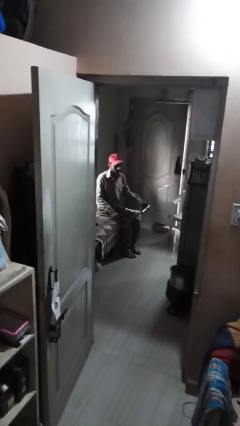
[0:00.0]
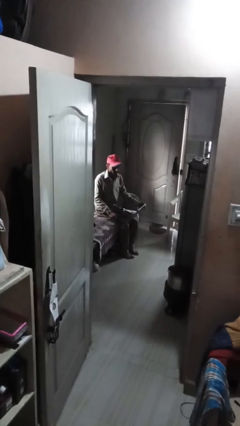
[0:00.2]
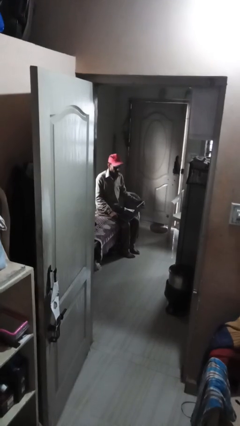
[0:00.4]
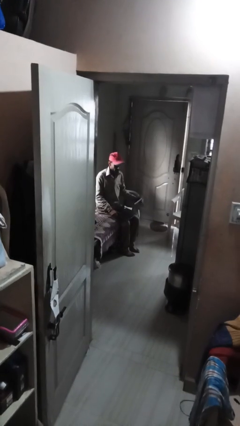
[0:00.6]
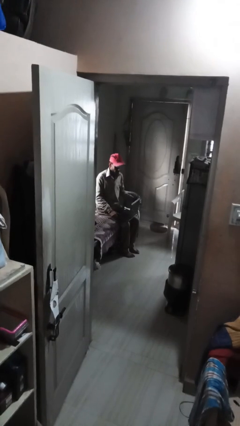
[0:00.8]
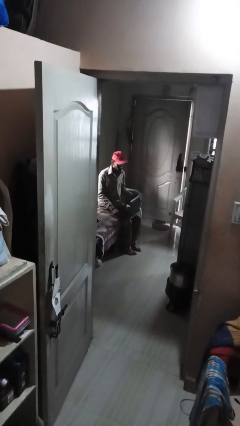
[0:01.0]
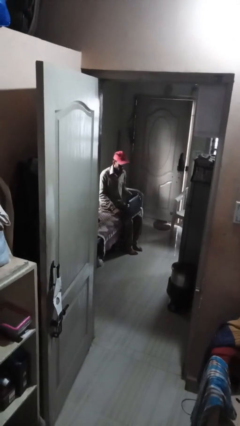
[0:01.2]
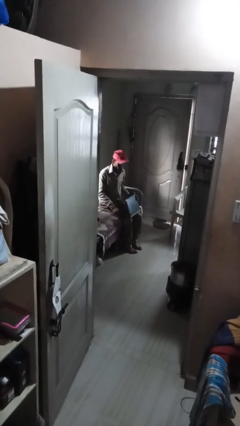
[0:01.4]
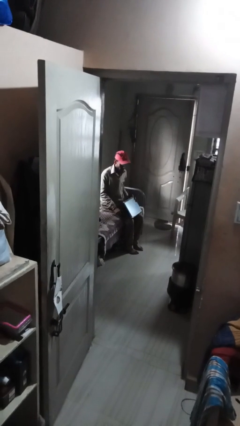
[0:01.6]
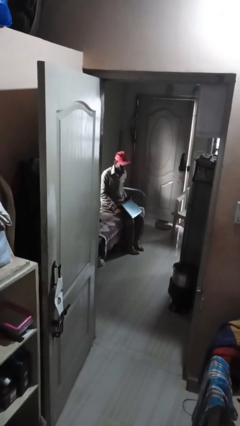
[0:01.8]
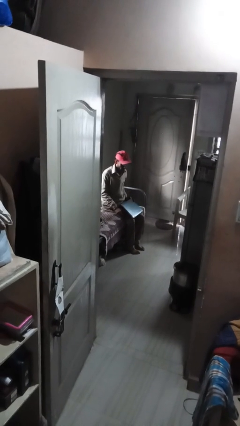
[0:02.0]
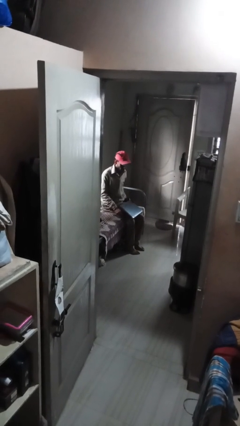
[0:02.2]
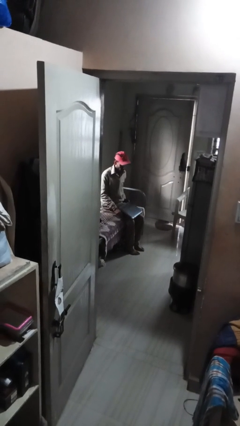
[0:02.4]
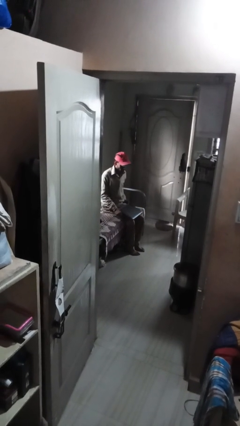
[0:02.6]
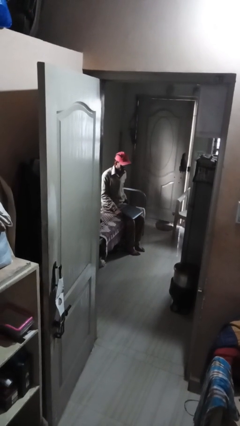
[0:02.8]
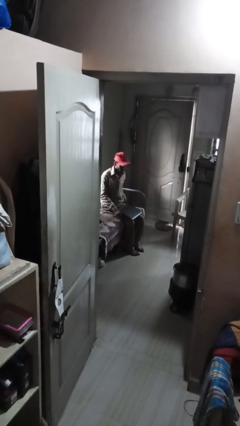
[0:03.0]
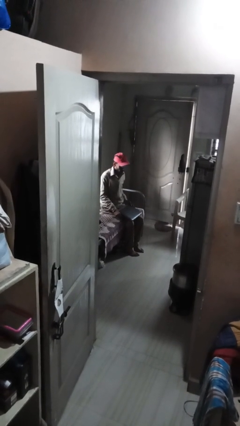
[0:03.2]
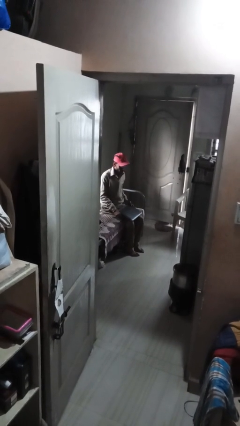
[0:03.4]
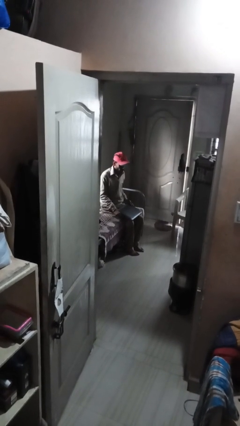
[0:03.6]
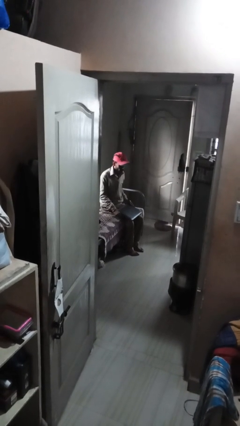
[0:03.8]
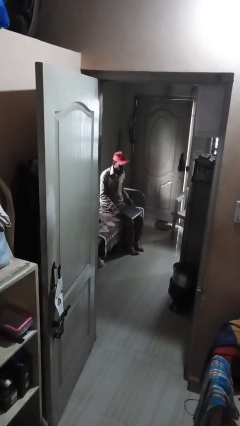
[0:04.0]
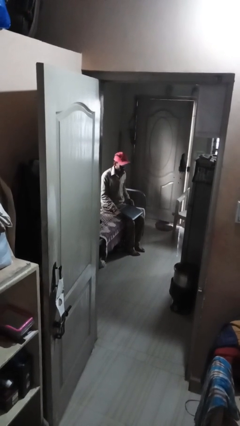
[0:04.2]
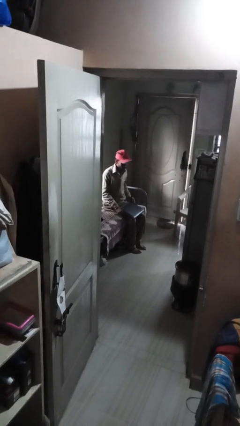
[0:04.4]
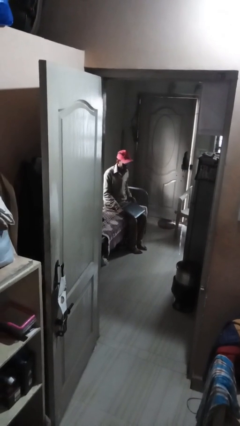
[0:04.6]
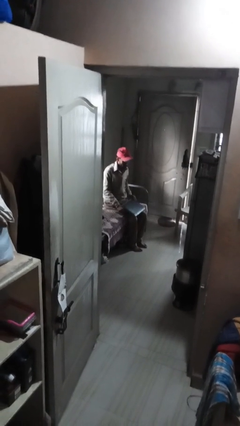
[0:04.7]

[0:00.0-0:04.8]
person closes laptop

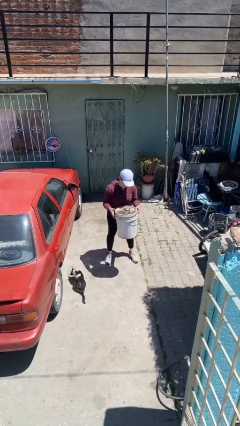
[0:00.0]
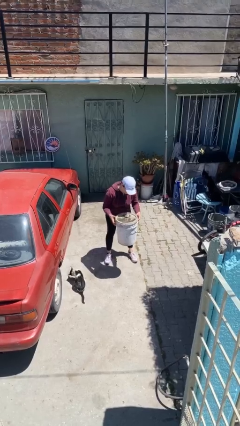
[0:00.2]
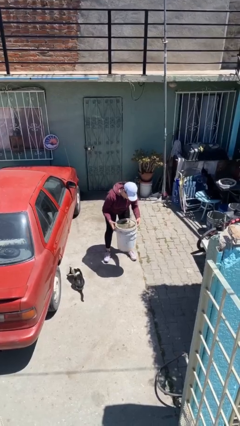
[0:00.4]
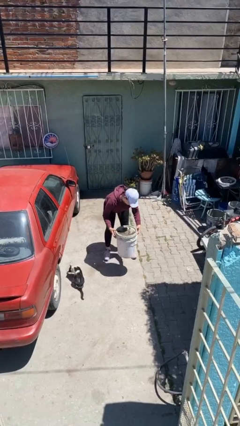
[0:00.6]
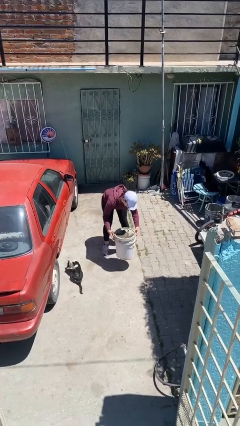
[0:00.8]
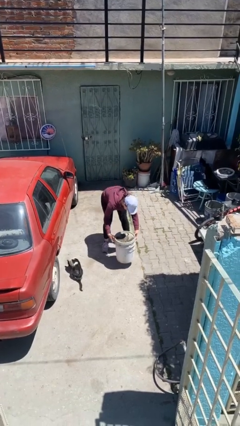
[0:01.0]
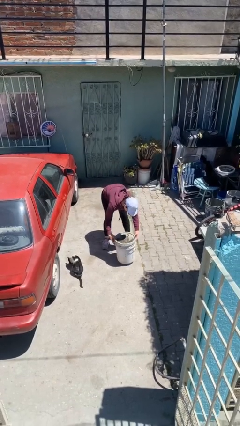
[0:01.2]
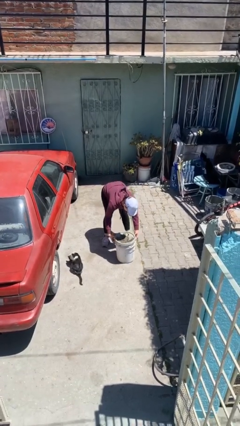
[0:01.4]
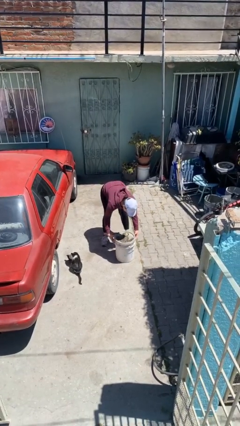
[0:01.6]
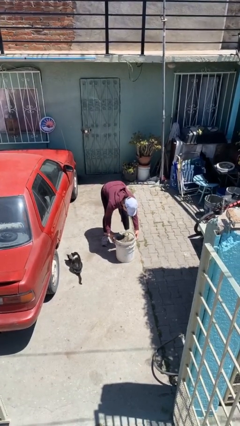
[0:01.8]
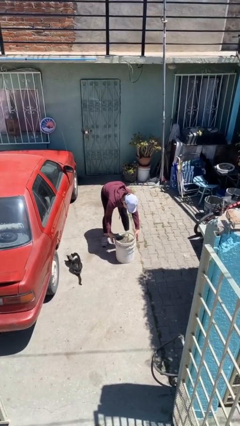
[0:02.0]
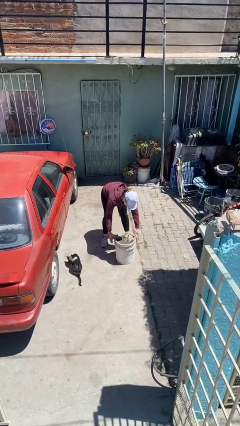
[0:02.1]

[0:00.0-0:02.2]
person puts down object on floor

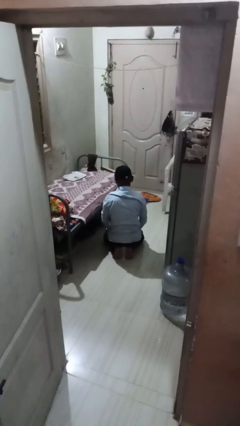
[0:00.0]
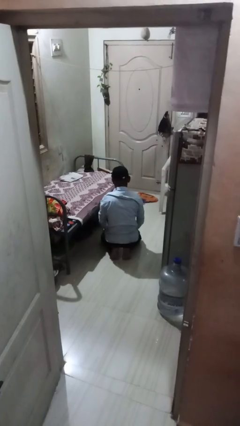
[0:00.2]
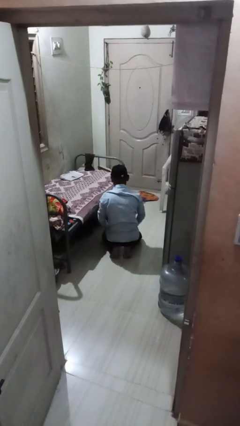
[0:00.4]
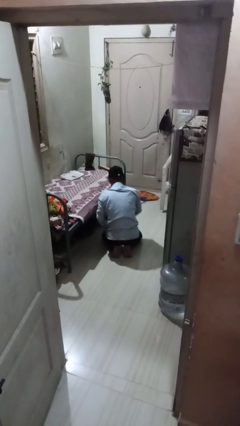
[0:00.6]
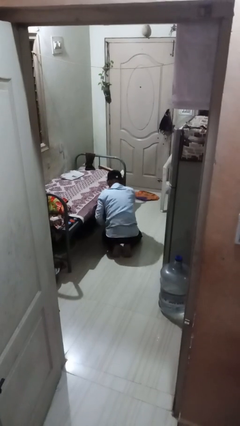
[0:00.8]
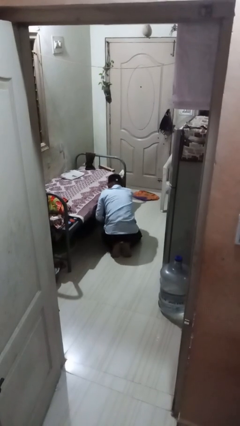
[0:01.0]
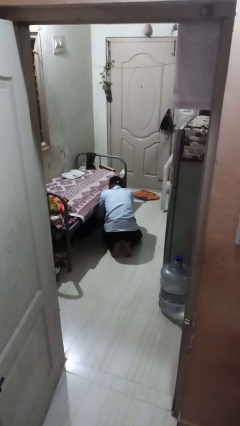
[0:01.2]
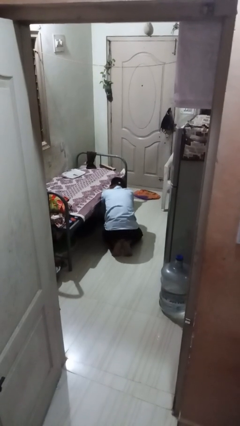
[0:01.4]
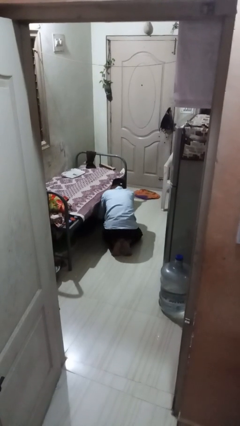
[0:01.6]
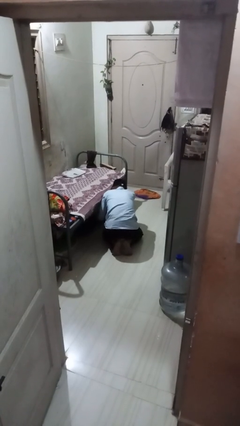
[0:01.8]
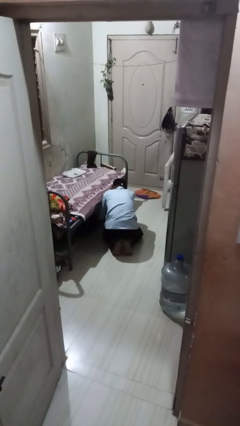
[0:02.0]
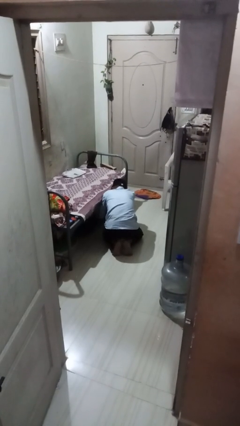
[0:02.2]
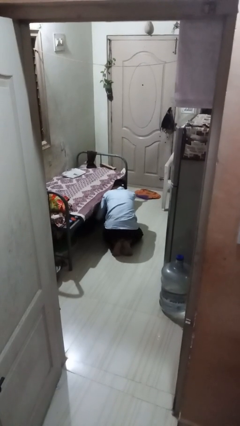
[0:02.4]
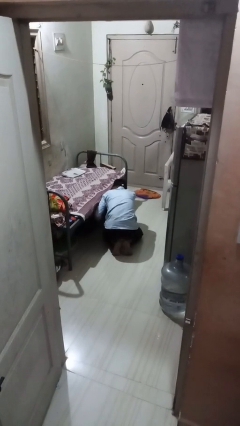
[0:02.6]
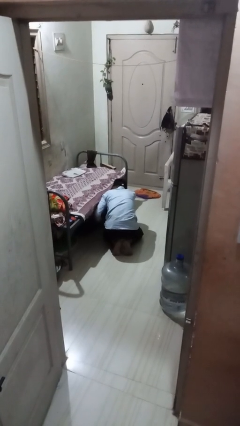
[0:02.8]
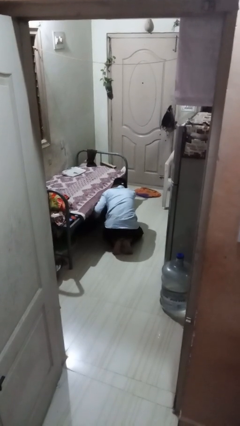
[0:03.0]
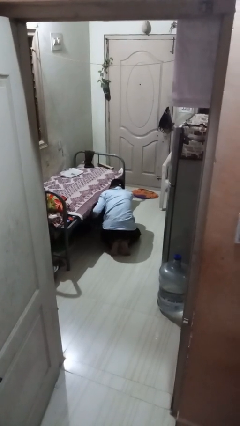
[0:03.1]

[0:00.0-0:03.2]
person searches under bed

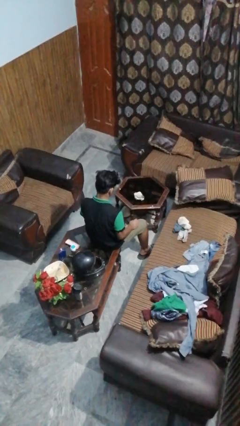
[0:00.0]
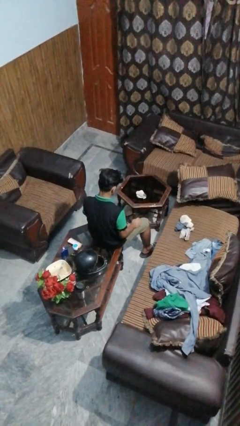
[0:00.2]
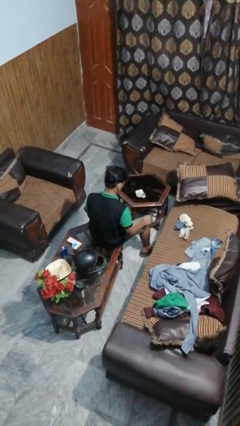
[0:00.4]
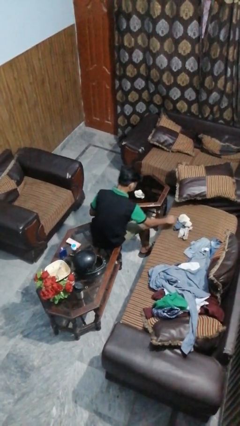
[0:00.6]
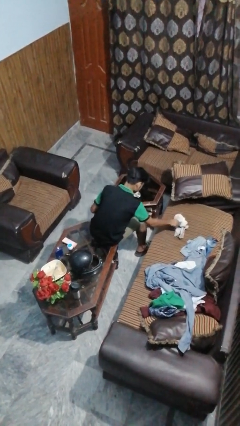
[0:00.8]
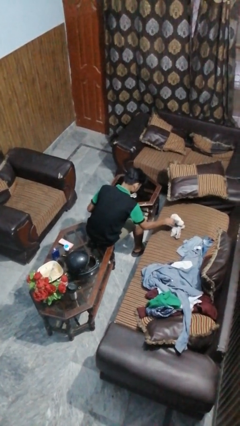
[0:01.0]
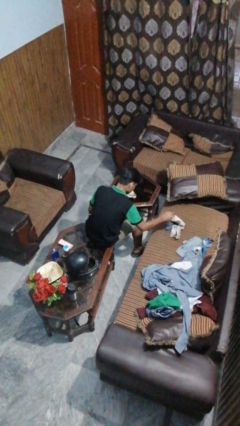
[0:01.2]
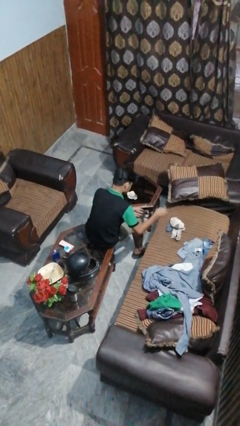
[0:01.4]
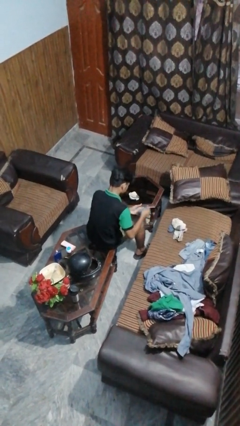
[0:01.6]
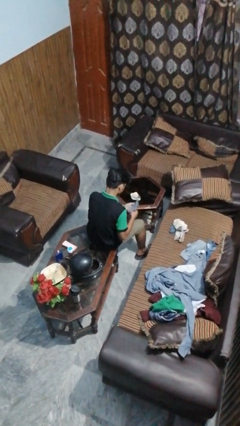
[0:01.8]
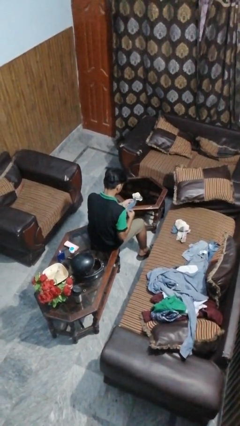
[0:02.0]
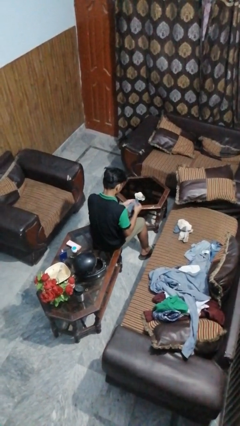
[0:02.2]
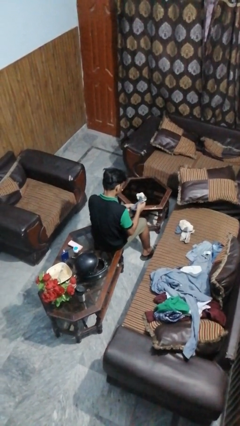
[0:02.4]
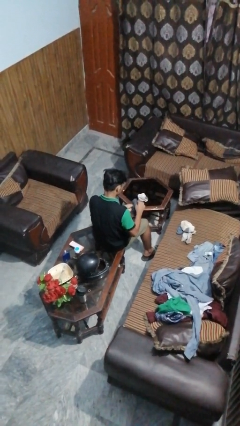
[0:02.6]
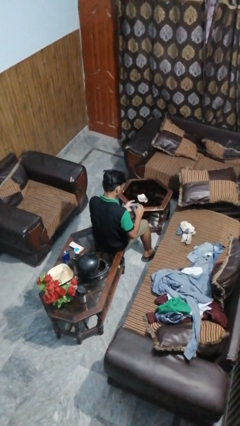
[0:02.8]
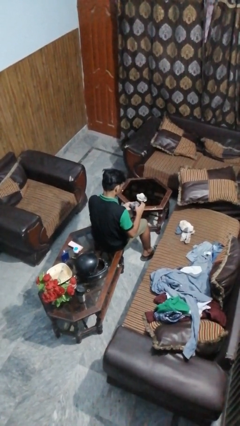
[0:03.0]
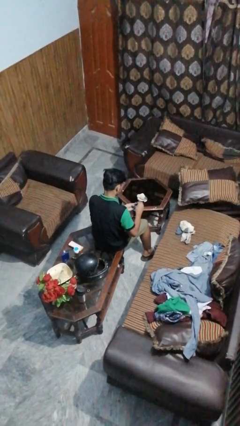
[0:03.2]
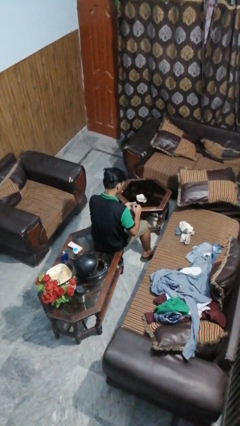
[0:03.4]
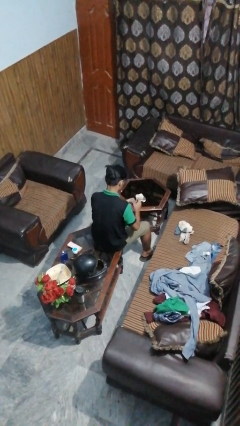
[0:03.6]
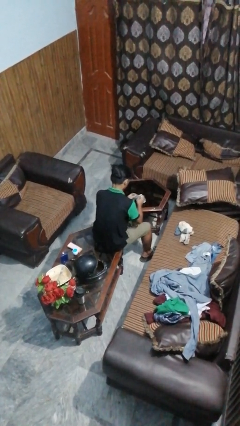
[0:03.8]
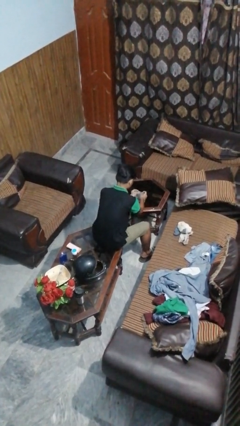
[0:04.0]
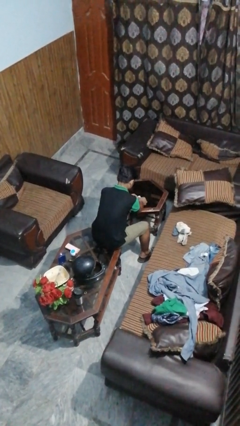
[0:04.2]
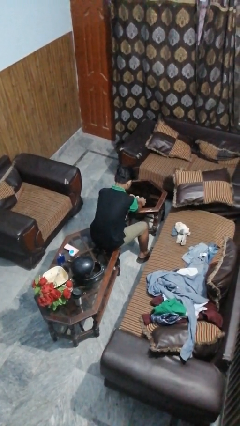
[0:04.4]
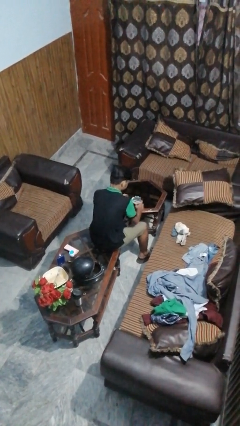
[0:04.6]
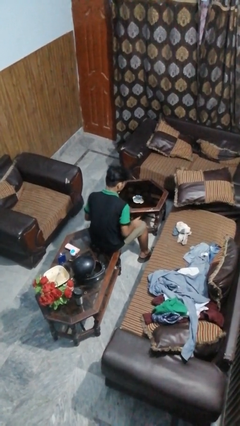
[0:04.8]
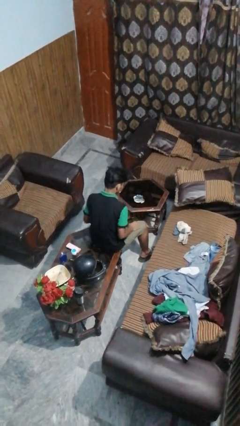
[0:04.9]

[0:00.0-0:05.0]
person folds socks

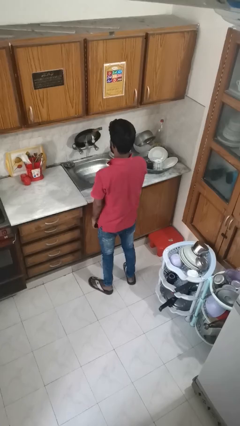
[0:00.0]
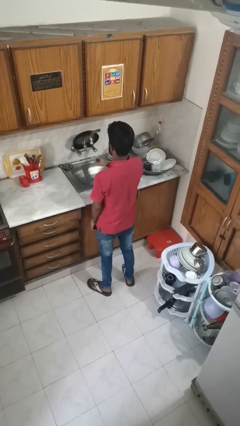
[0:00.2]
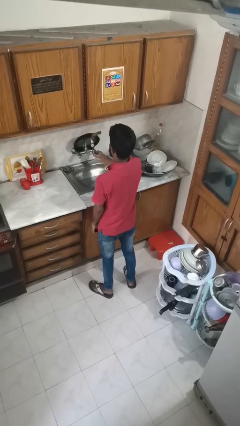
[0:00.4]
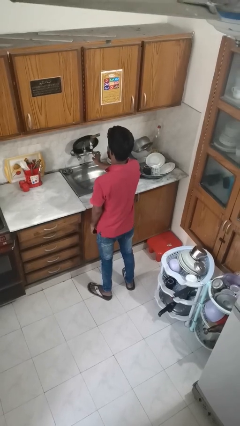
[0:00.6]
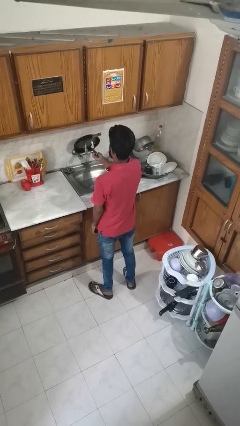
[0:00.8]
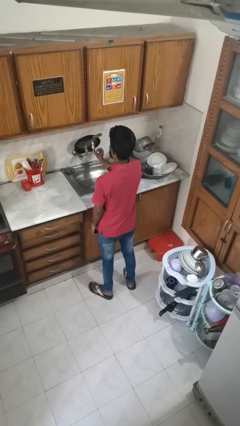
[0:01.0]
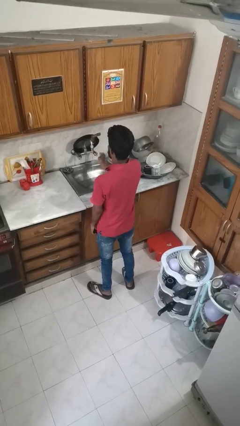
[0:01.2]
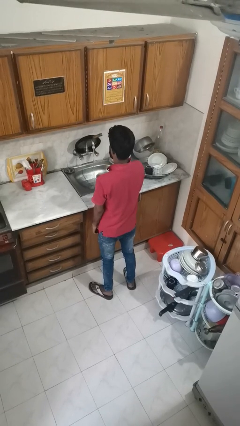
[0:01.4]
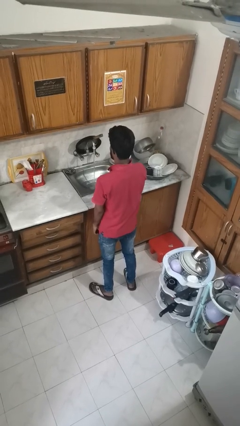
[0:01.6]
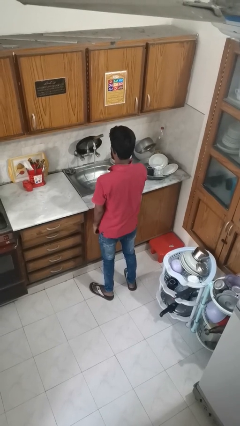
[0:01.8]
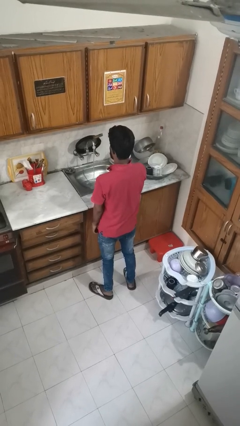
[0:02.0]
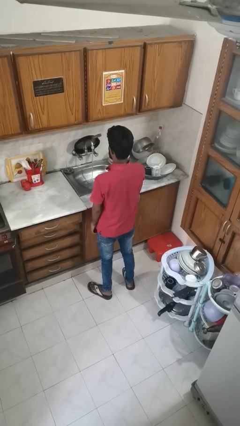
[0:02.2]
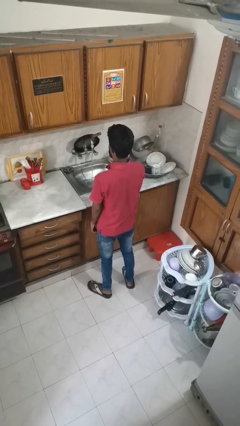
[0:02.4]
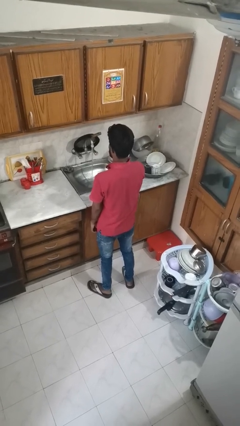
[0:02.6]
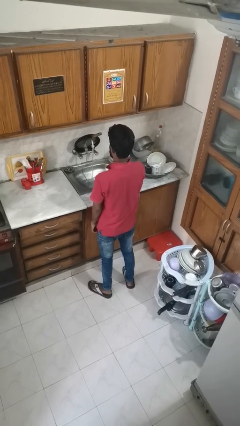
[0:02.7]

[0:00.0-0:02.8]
person turns on faucet
